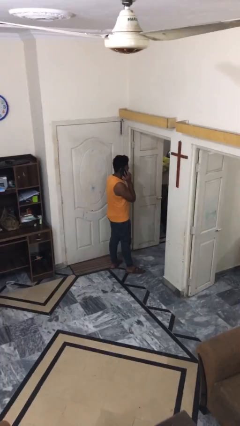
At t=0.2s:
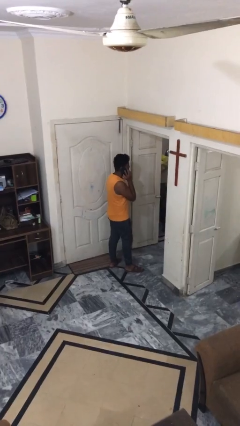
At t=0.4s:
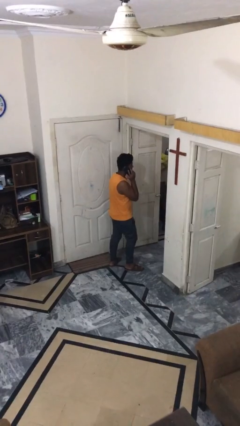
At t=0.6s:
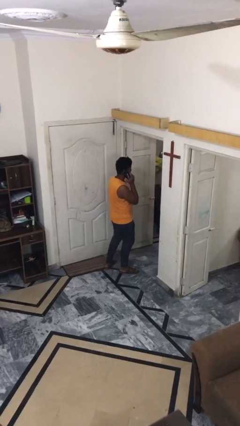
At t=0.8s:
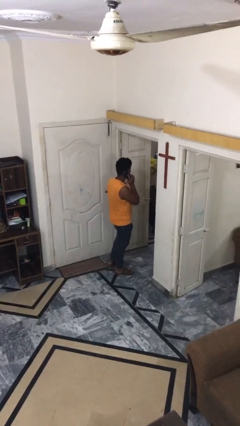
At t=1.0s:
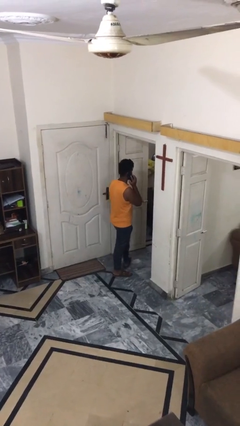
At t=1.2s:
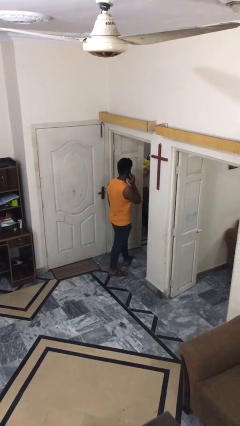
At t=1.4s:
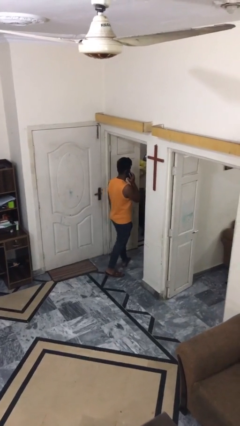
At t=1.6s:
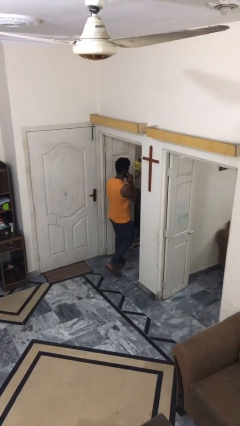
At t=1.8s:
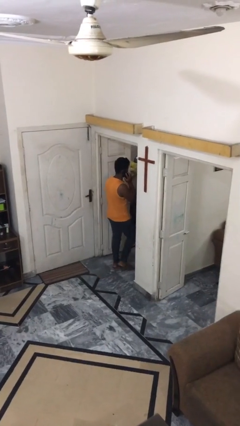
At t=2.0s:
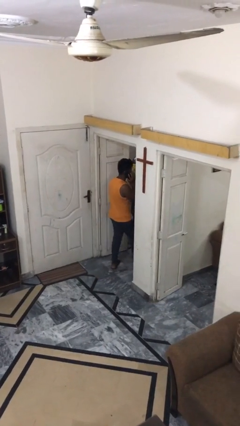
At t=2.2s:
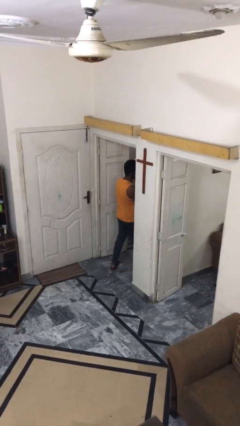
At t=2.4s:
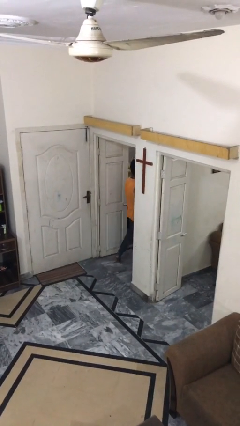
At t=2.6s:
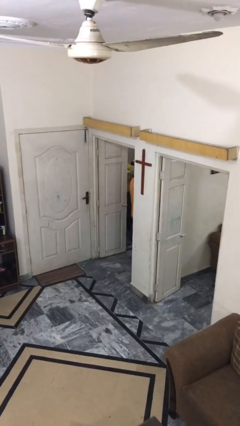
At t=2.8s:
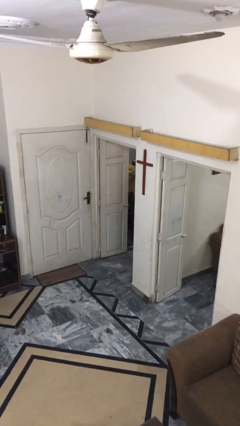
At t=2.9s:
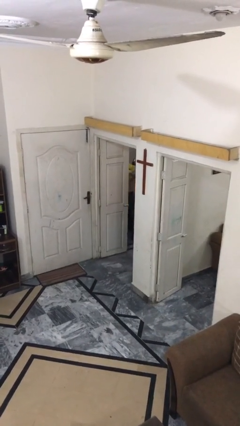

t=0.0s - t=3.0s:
person exits scene through structure

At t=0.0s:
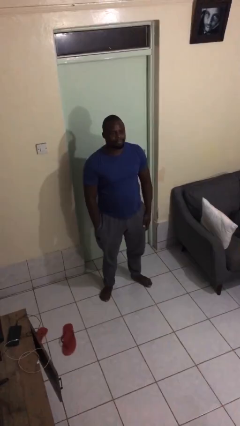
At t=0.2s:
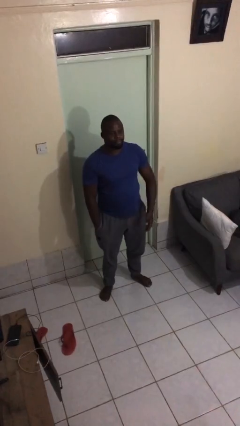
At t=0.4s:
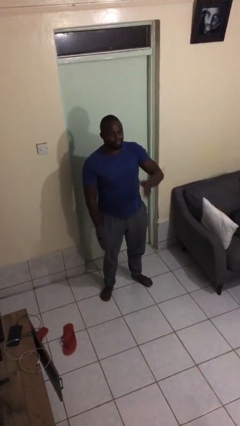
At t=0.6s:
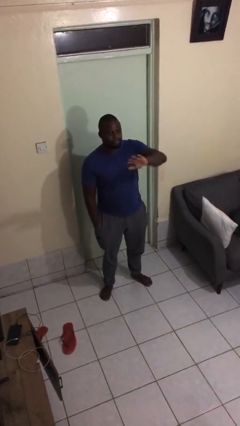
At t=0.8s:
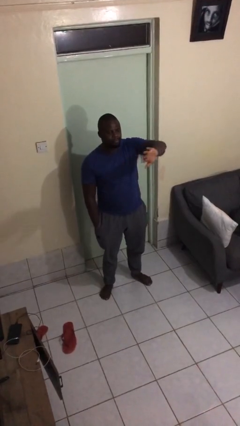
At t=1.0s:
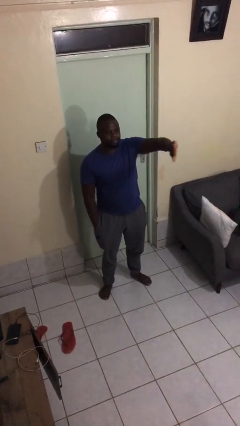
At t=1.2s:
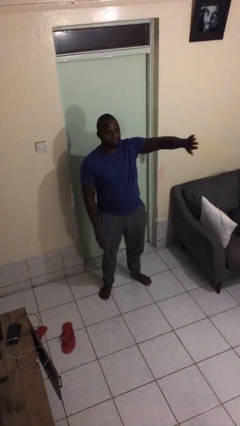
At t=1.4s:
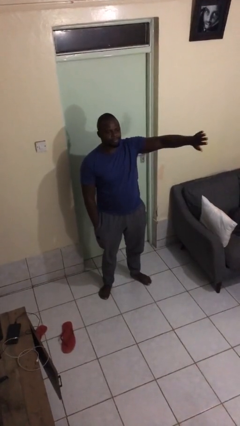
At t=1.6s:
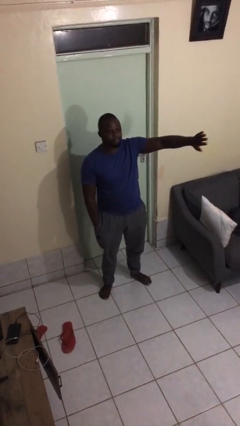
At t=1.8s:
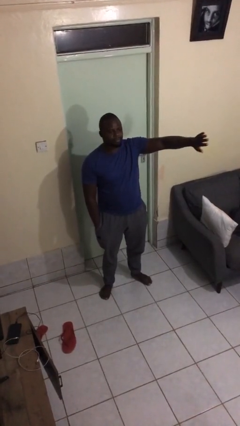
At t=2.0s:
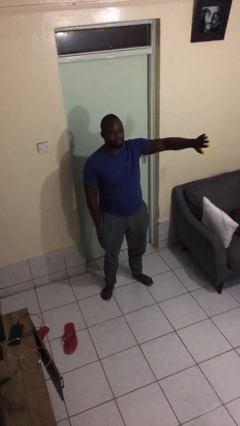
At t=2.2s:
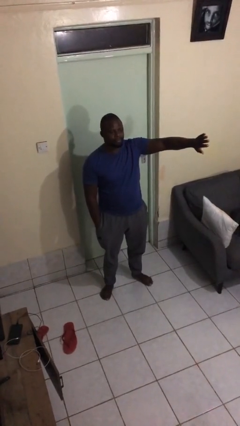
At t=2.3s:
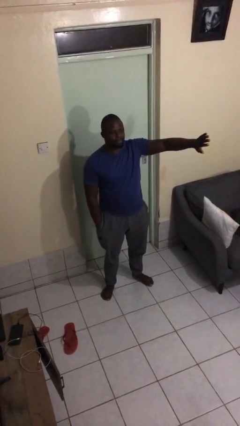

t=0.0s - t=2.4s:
person gestures swipe left

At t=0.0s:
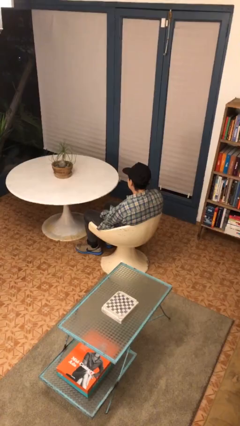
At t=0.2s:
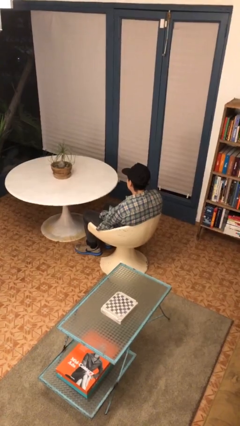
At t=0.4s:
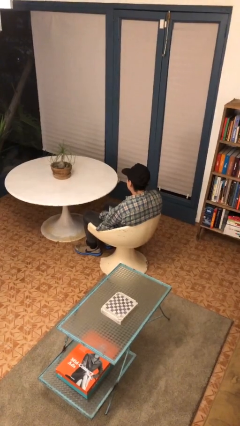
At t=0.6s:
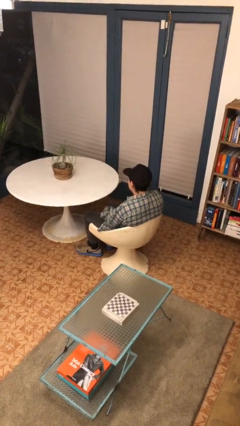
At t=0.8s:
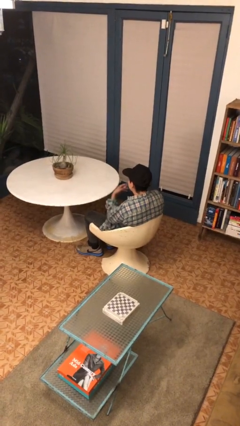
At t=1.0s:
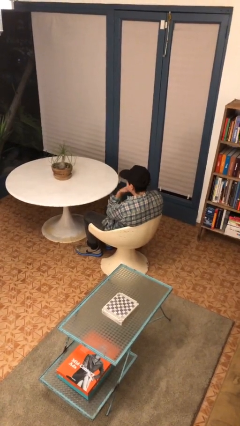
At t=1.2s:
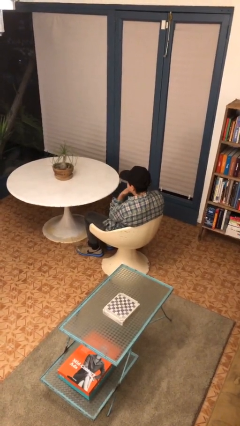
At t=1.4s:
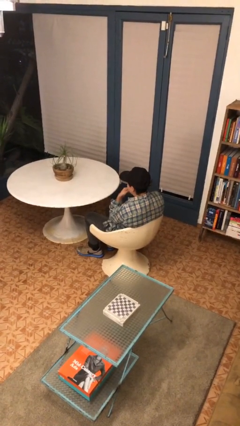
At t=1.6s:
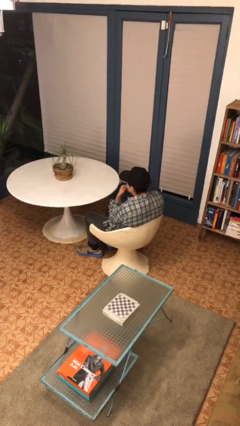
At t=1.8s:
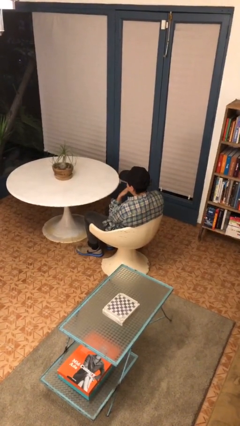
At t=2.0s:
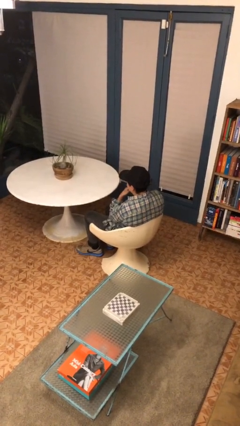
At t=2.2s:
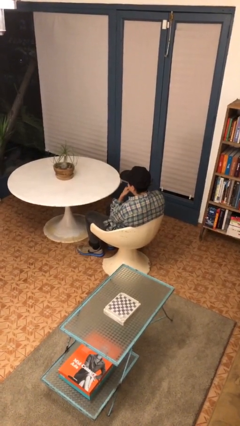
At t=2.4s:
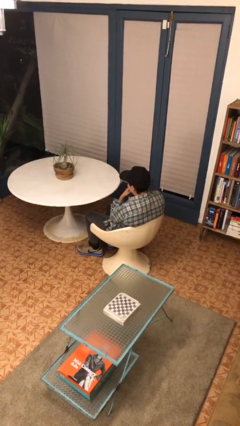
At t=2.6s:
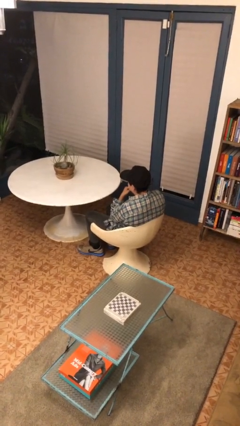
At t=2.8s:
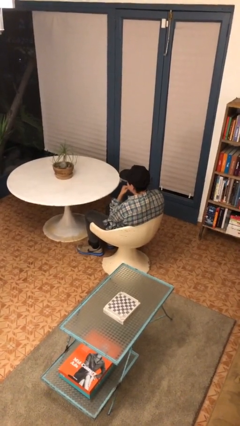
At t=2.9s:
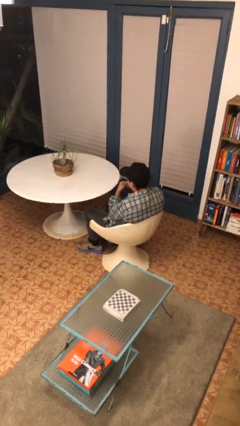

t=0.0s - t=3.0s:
person strokes chin

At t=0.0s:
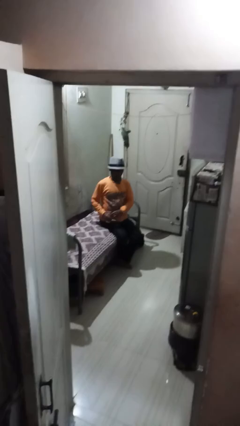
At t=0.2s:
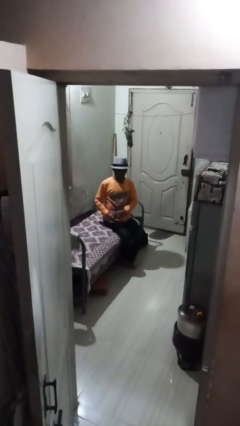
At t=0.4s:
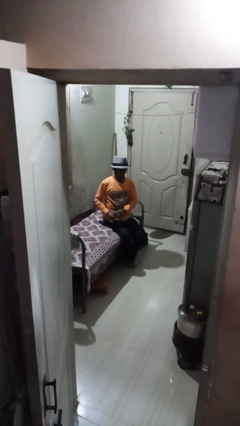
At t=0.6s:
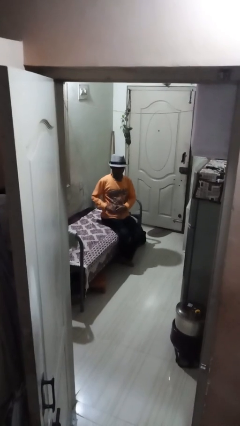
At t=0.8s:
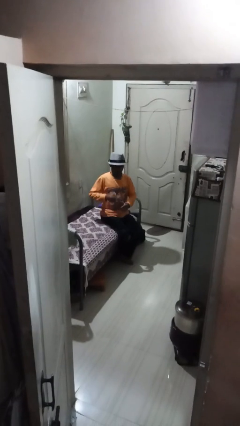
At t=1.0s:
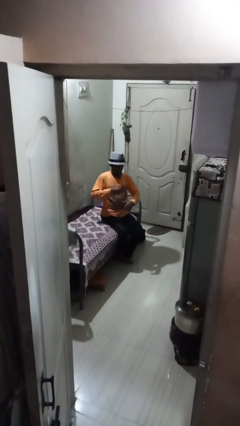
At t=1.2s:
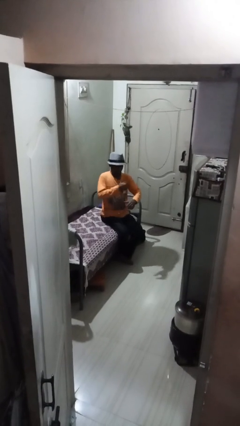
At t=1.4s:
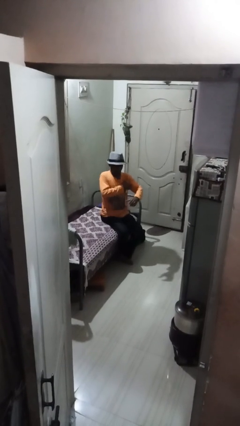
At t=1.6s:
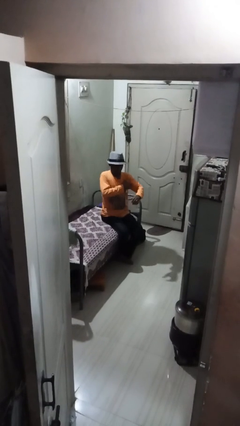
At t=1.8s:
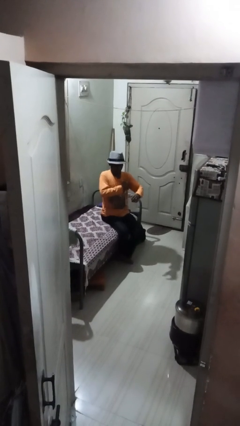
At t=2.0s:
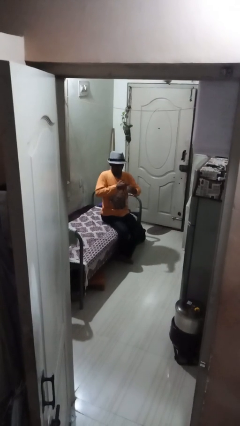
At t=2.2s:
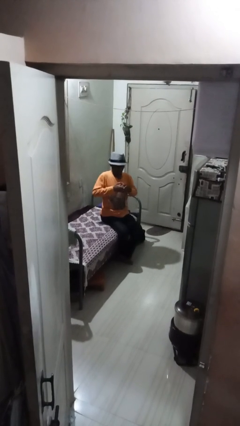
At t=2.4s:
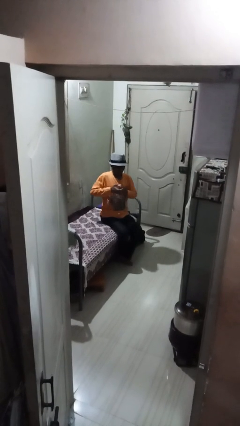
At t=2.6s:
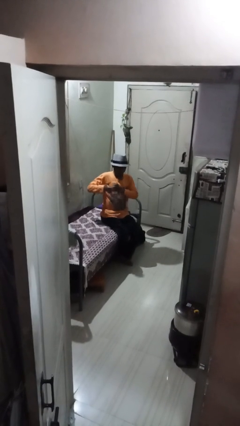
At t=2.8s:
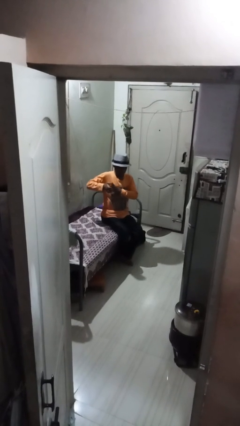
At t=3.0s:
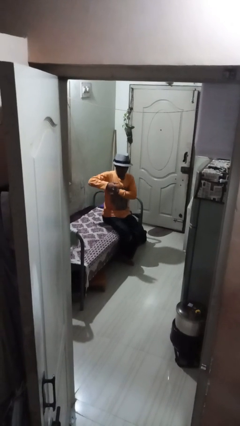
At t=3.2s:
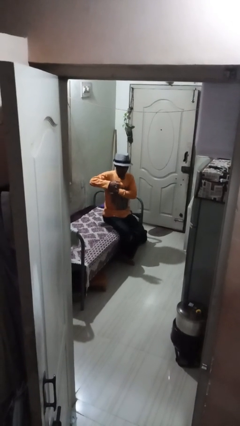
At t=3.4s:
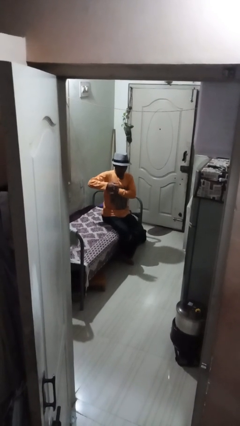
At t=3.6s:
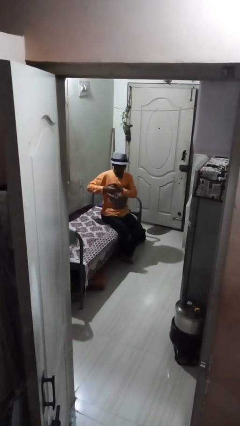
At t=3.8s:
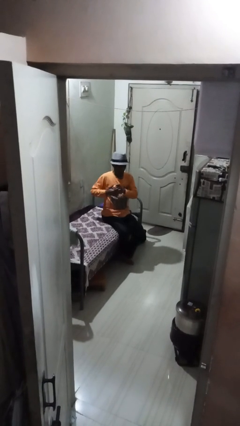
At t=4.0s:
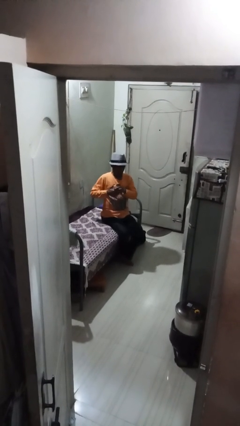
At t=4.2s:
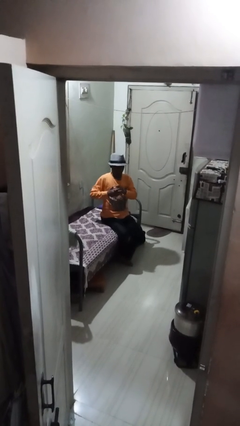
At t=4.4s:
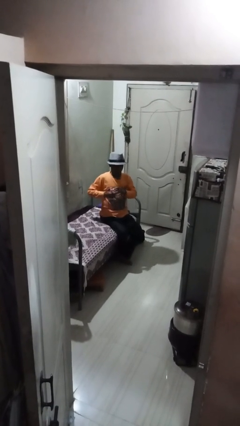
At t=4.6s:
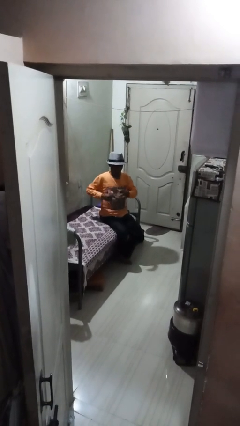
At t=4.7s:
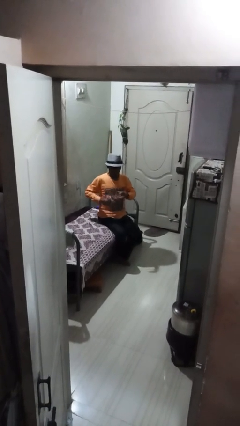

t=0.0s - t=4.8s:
person applies deodorant

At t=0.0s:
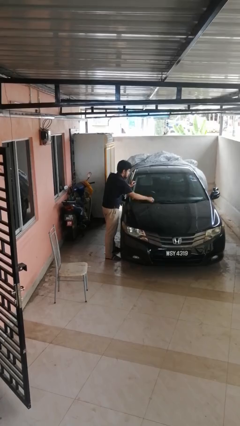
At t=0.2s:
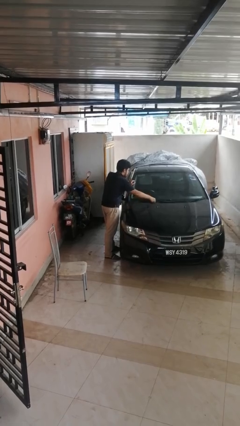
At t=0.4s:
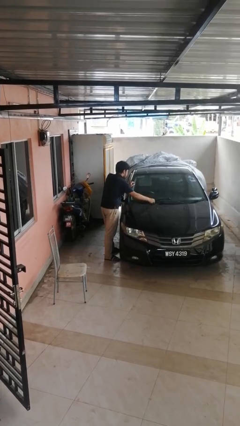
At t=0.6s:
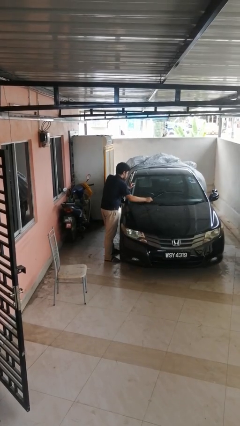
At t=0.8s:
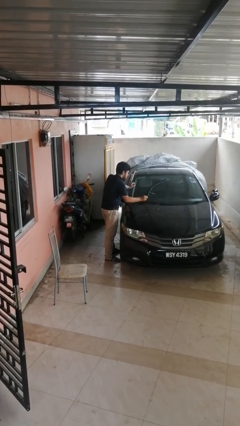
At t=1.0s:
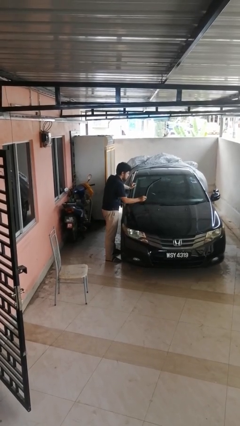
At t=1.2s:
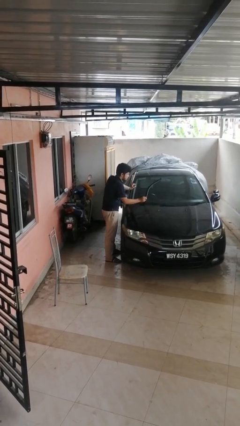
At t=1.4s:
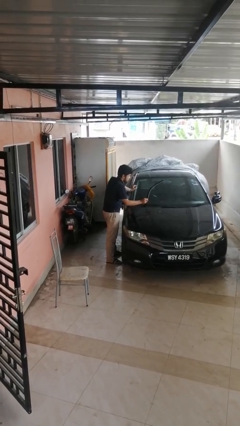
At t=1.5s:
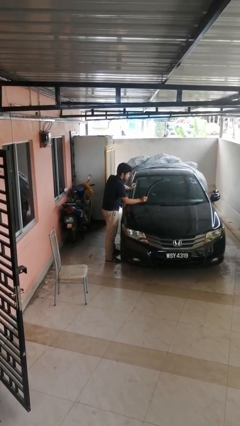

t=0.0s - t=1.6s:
person flips up car wipers

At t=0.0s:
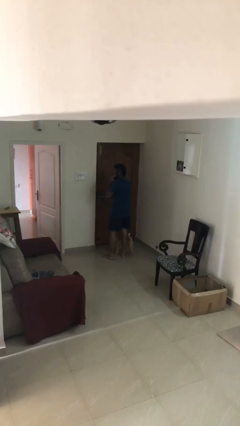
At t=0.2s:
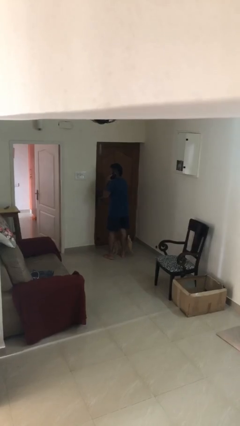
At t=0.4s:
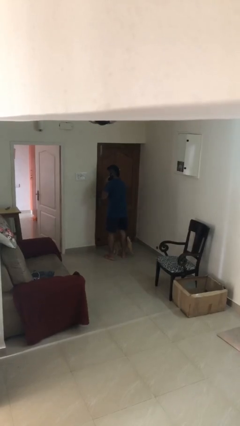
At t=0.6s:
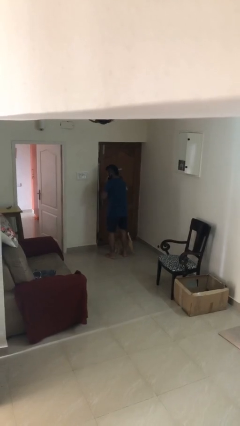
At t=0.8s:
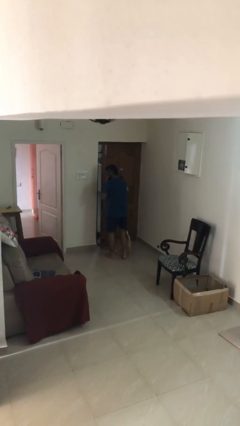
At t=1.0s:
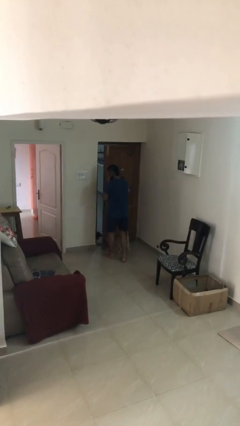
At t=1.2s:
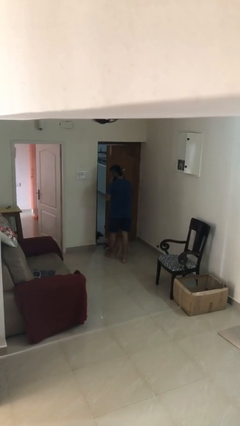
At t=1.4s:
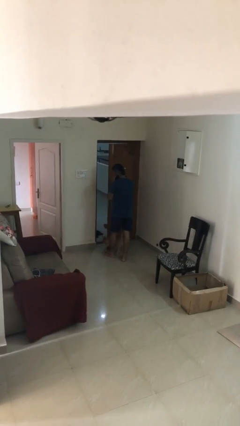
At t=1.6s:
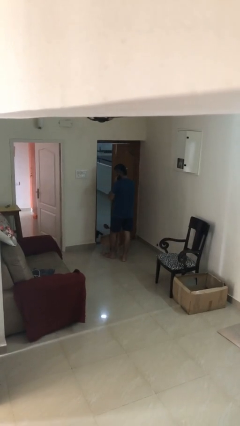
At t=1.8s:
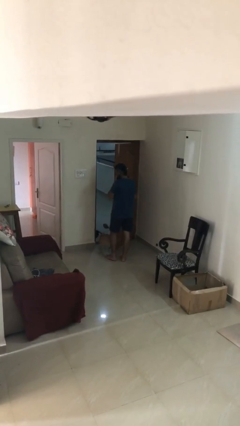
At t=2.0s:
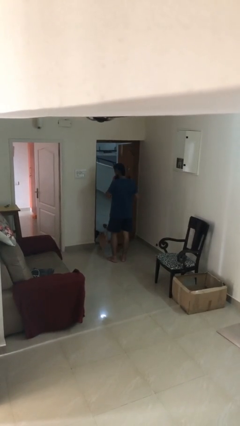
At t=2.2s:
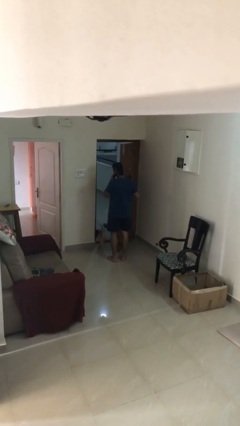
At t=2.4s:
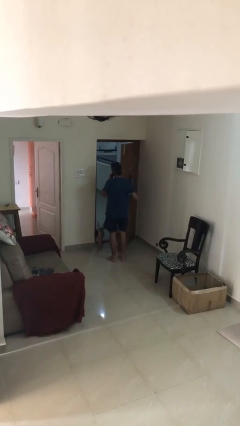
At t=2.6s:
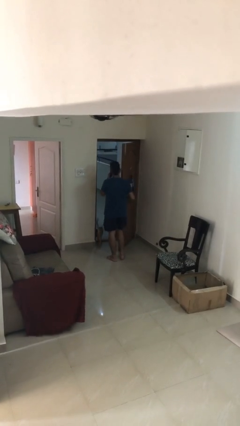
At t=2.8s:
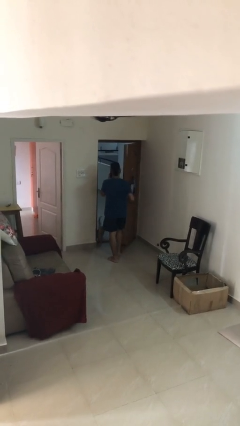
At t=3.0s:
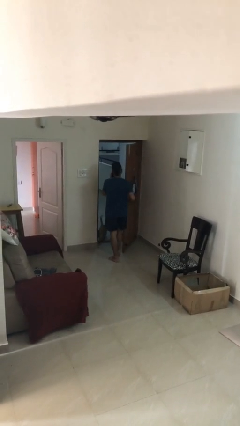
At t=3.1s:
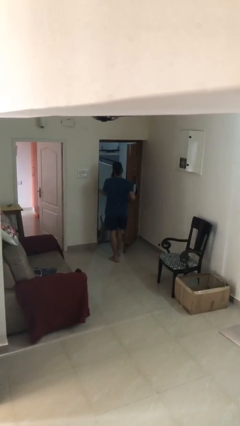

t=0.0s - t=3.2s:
person opens facility door
